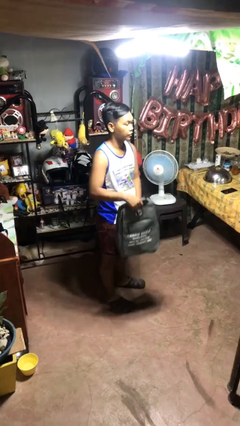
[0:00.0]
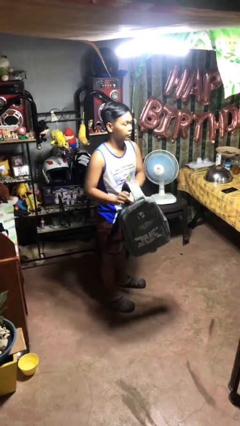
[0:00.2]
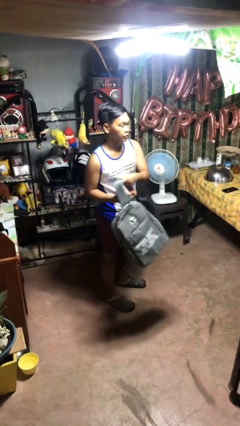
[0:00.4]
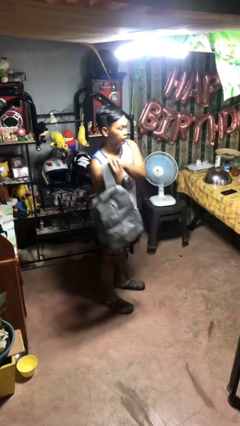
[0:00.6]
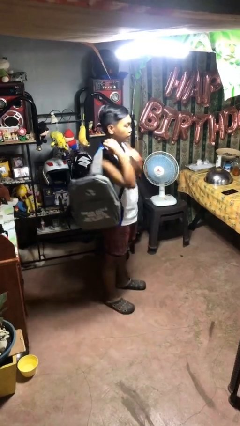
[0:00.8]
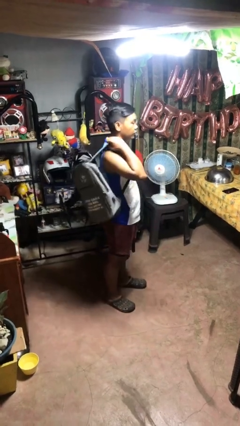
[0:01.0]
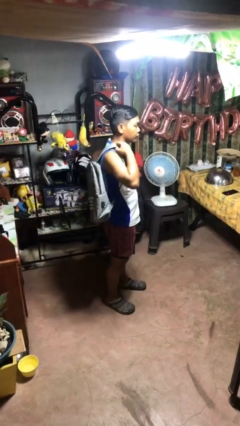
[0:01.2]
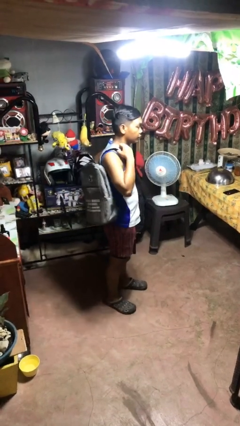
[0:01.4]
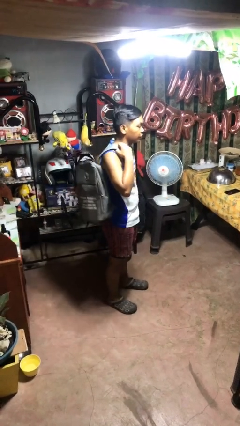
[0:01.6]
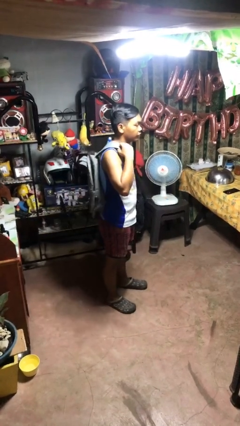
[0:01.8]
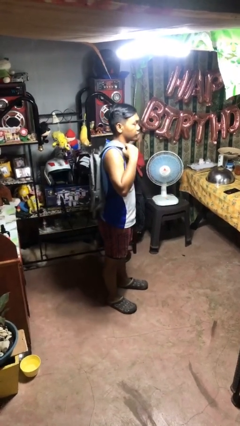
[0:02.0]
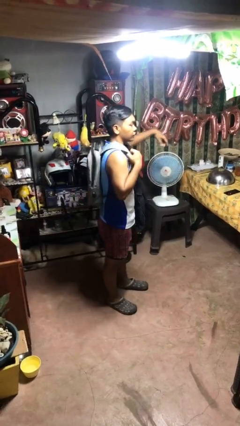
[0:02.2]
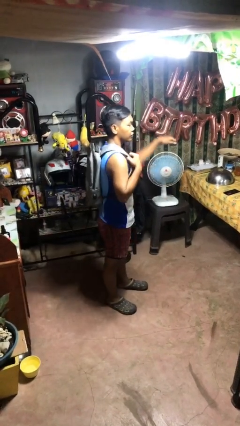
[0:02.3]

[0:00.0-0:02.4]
person puts on backpack

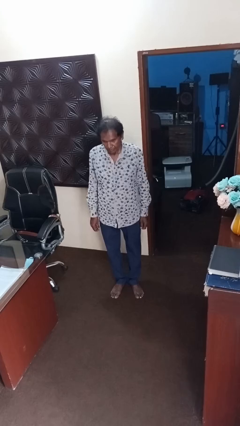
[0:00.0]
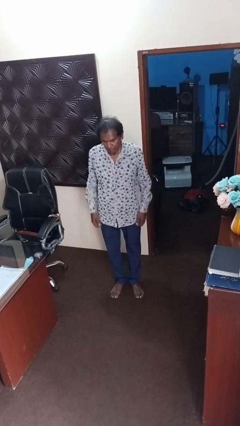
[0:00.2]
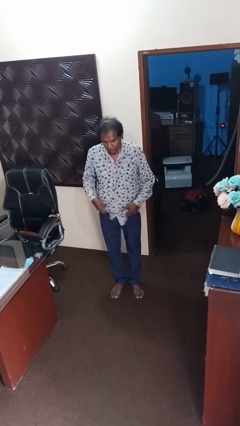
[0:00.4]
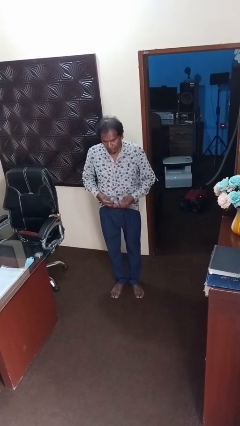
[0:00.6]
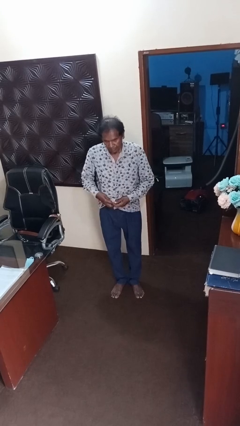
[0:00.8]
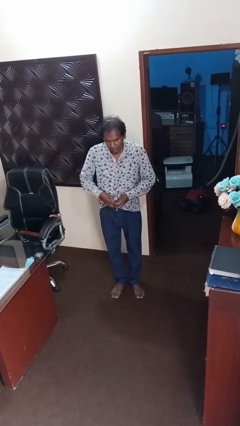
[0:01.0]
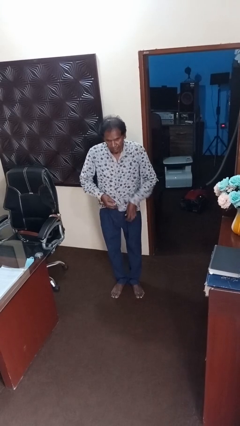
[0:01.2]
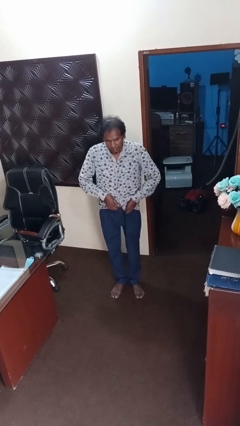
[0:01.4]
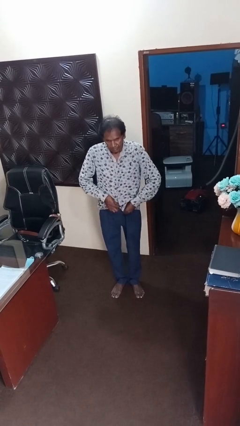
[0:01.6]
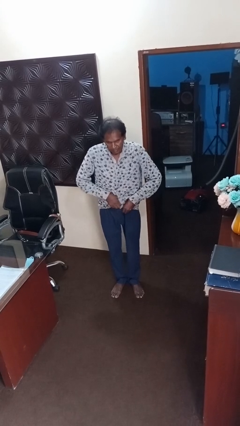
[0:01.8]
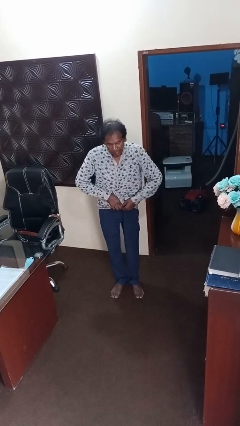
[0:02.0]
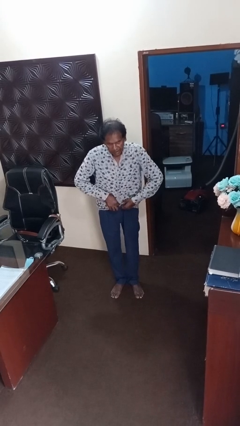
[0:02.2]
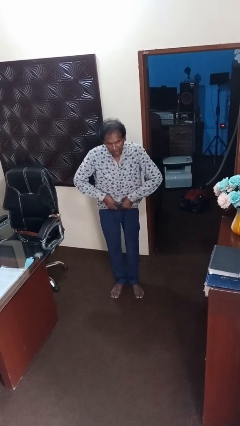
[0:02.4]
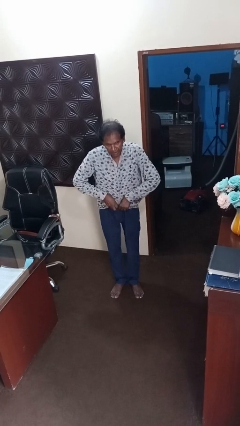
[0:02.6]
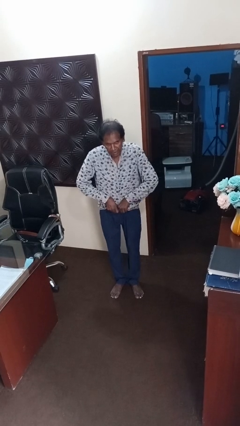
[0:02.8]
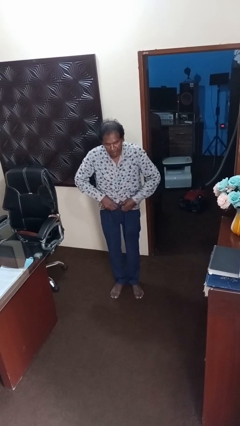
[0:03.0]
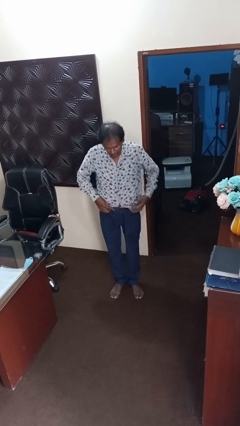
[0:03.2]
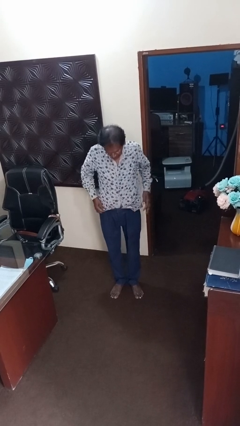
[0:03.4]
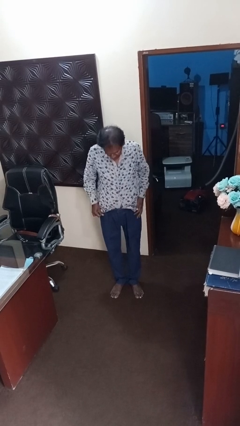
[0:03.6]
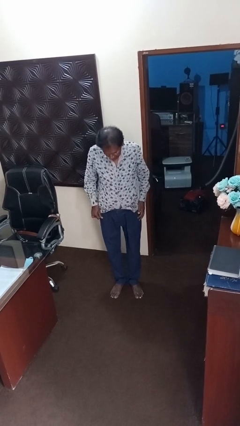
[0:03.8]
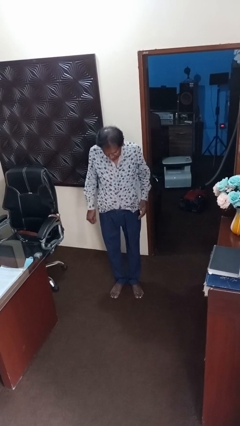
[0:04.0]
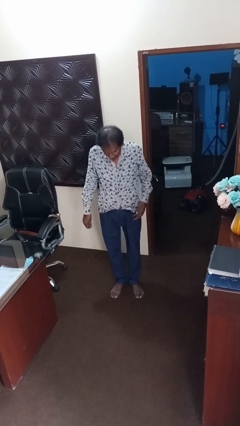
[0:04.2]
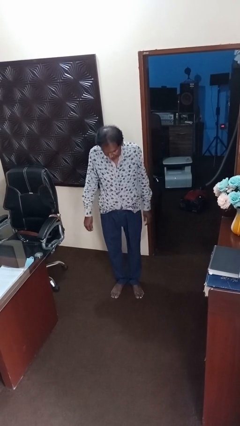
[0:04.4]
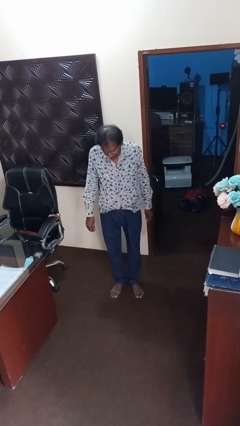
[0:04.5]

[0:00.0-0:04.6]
person tucks in shirt

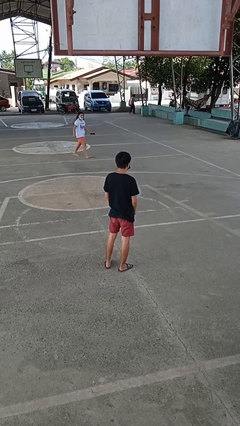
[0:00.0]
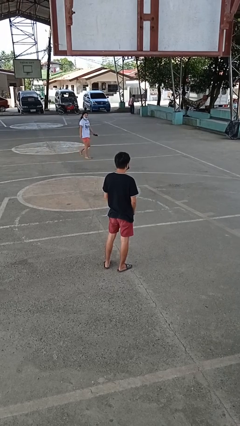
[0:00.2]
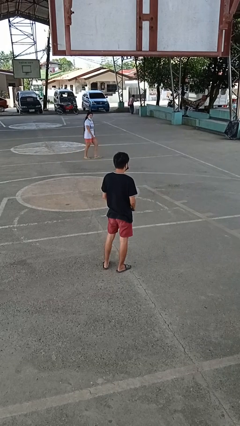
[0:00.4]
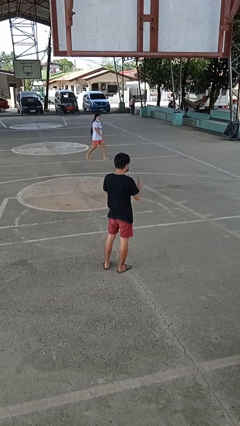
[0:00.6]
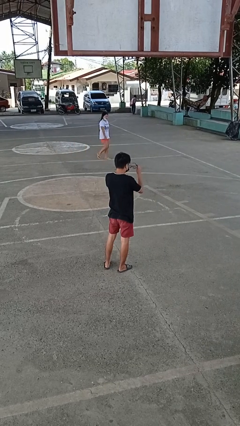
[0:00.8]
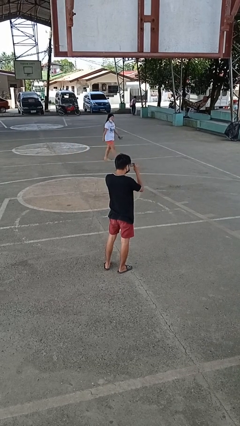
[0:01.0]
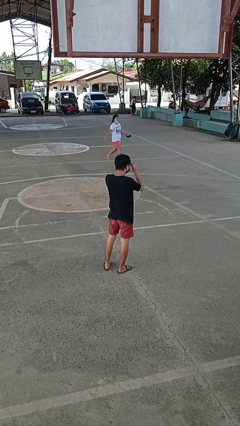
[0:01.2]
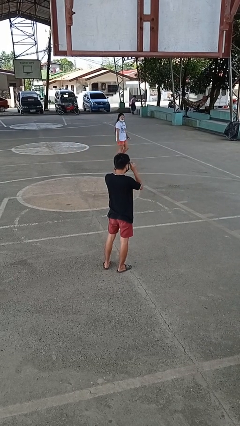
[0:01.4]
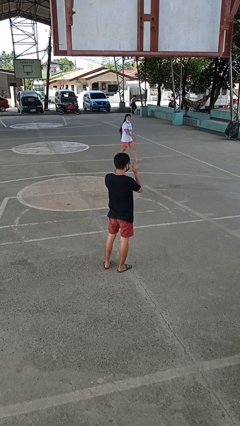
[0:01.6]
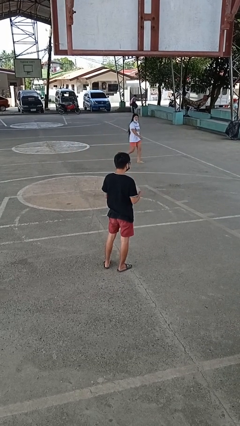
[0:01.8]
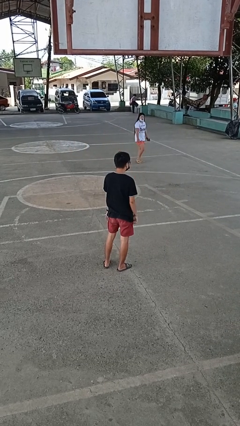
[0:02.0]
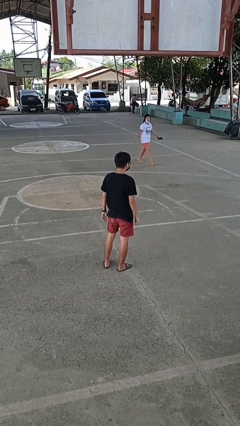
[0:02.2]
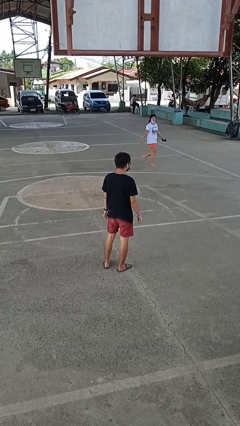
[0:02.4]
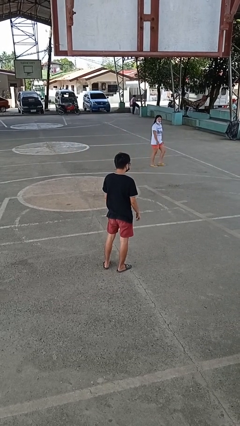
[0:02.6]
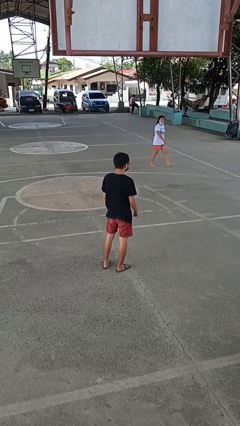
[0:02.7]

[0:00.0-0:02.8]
person puts on glasses

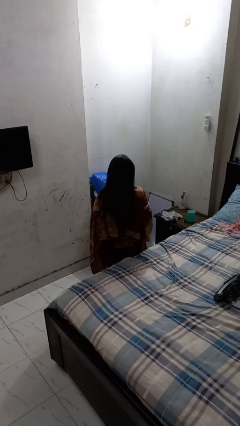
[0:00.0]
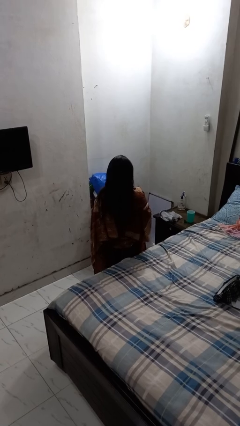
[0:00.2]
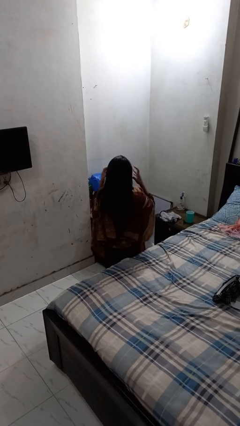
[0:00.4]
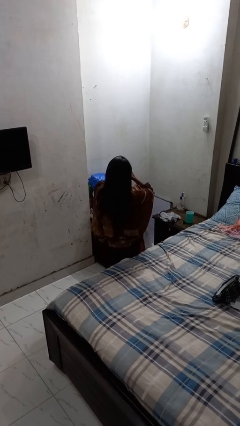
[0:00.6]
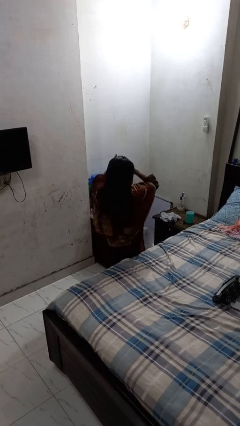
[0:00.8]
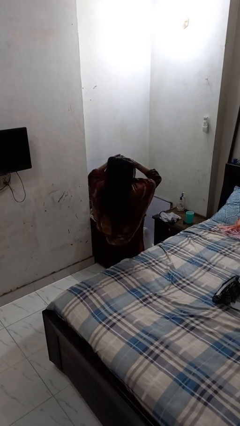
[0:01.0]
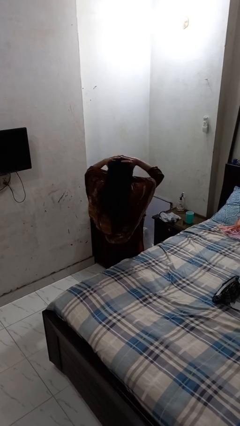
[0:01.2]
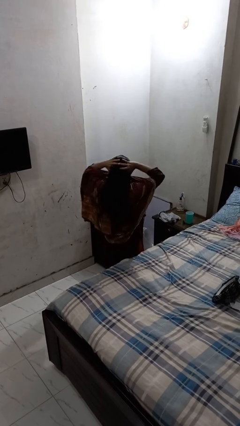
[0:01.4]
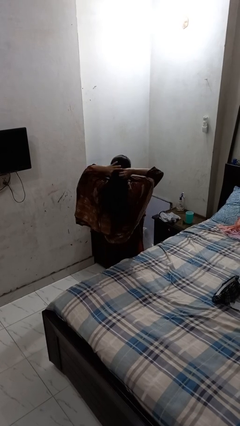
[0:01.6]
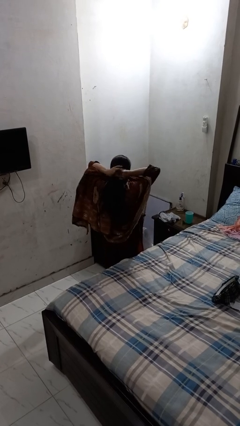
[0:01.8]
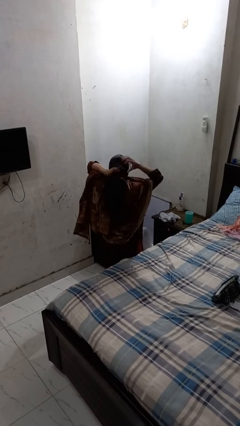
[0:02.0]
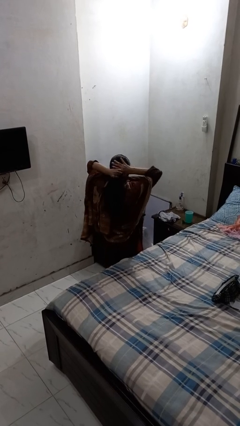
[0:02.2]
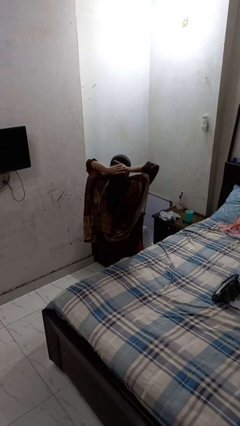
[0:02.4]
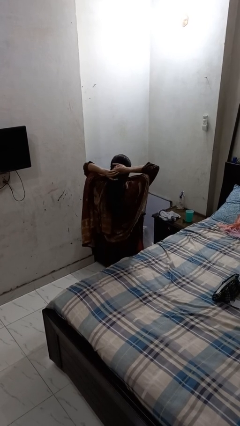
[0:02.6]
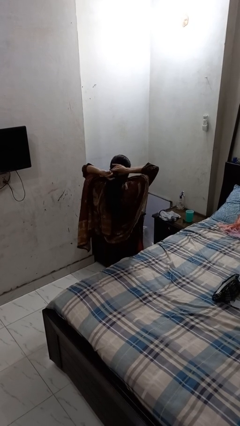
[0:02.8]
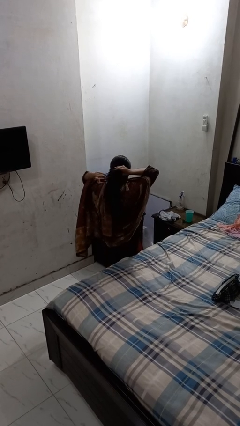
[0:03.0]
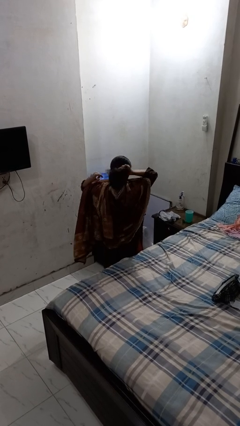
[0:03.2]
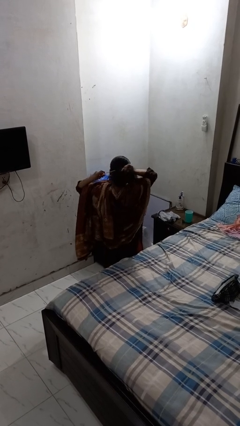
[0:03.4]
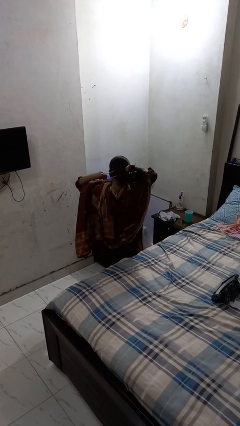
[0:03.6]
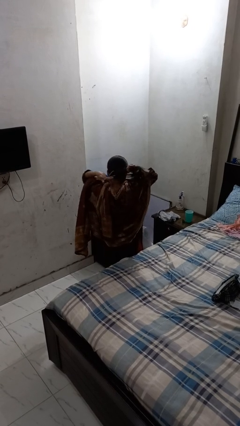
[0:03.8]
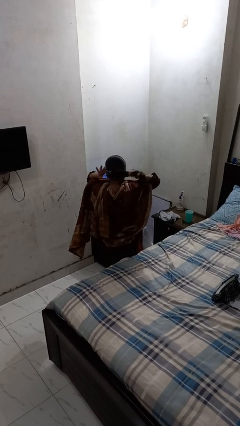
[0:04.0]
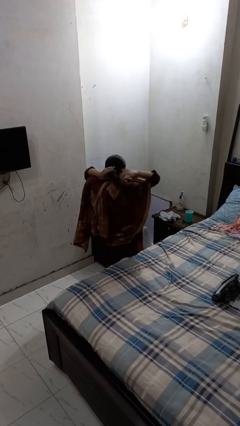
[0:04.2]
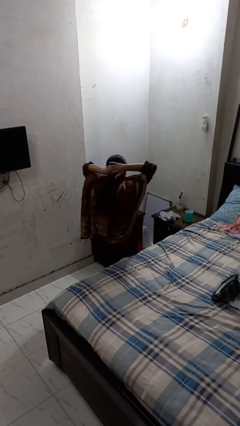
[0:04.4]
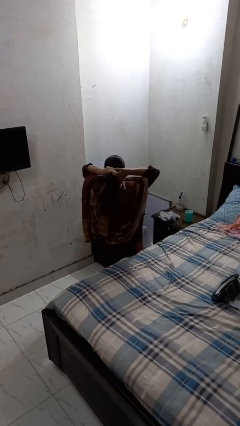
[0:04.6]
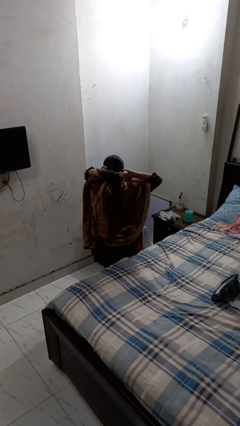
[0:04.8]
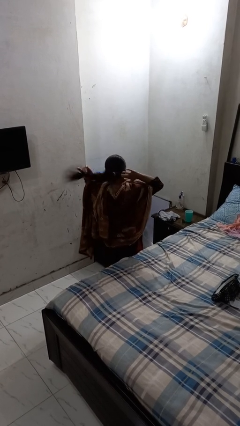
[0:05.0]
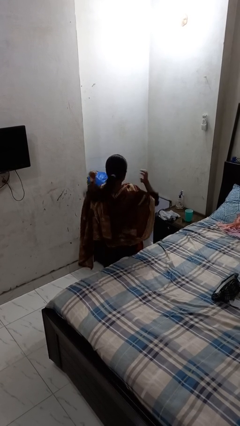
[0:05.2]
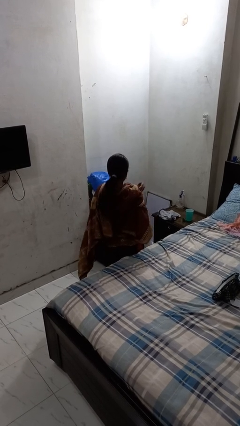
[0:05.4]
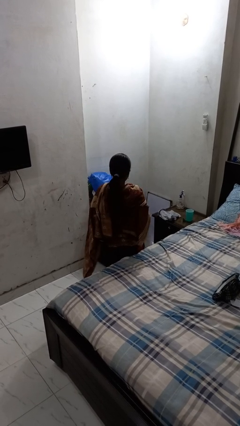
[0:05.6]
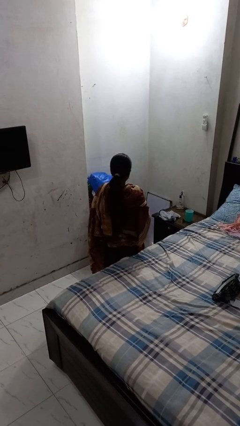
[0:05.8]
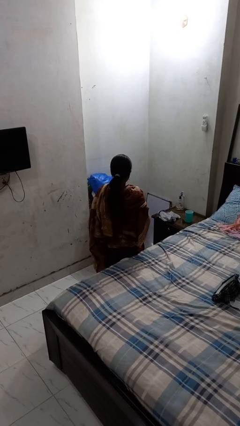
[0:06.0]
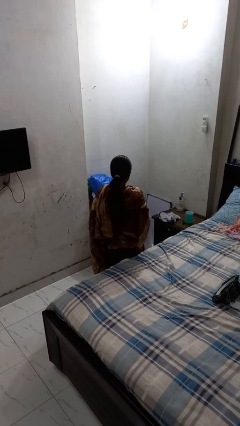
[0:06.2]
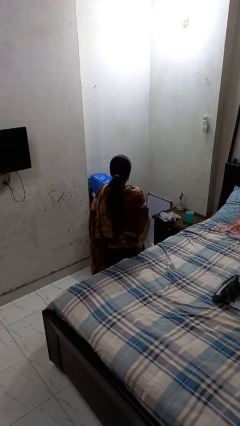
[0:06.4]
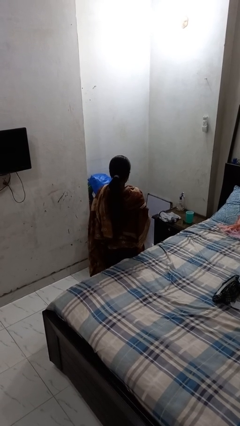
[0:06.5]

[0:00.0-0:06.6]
person puts hair in ponytail

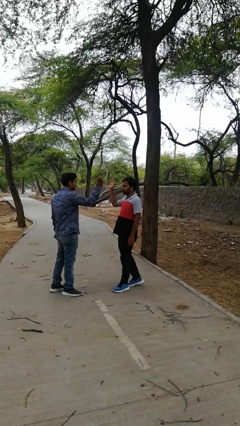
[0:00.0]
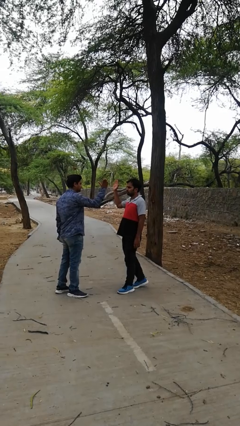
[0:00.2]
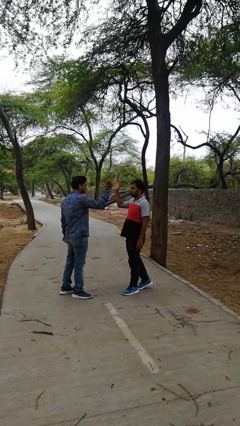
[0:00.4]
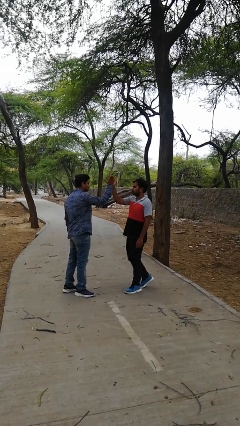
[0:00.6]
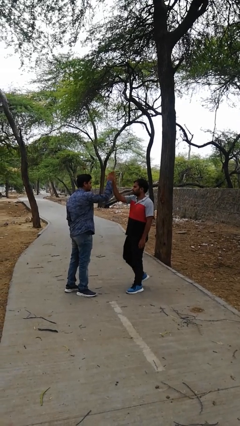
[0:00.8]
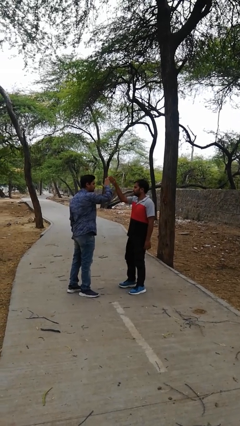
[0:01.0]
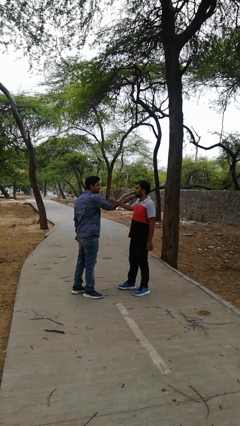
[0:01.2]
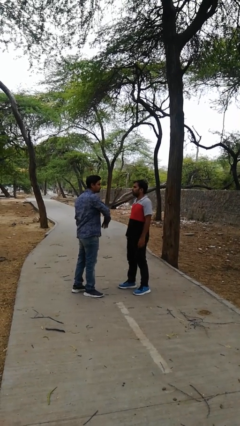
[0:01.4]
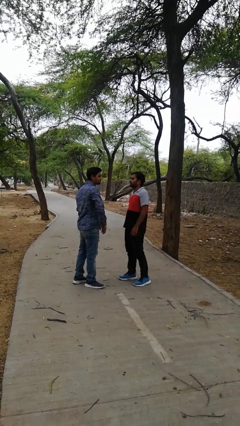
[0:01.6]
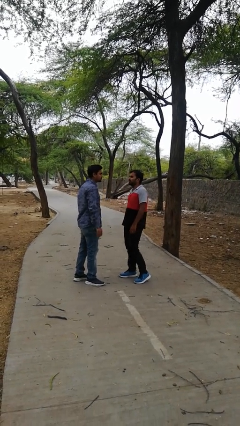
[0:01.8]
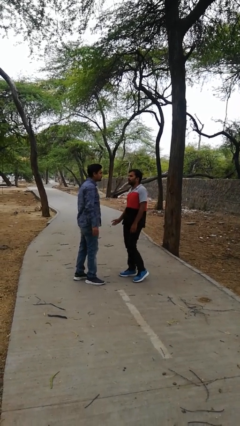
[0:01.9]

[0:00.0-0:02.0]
person highfives hand
